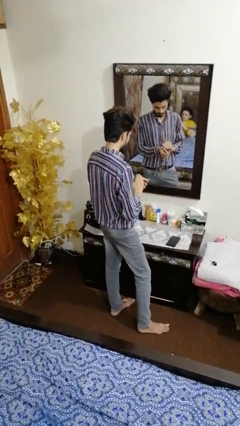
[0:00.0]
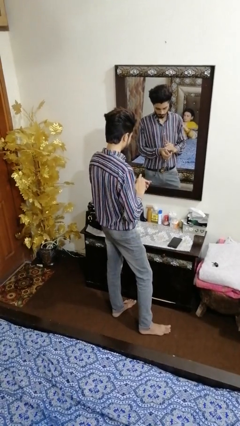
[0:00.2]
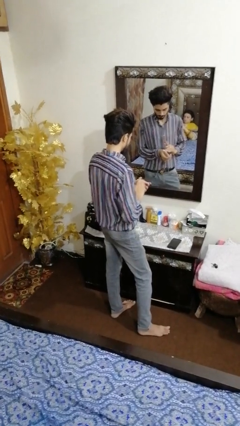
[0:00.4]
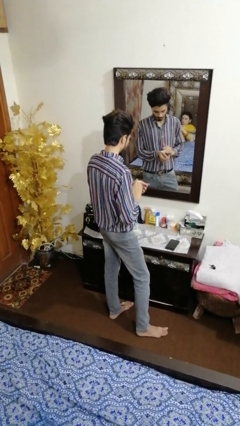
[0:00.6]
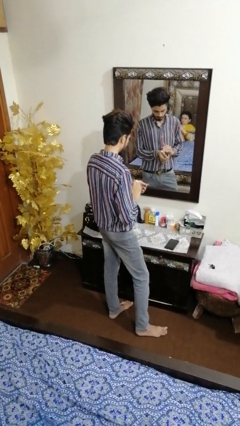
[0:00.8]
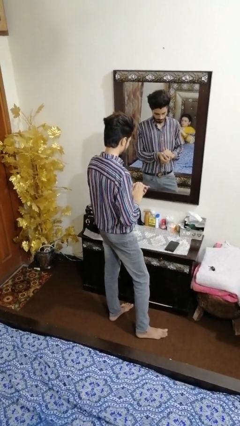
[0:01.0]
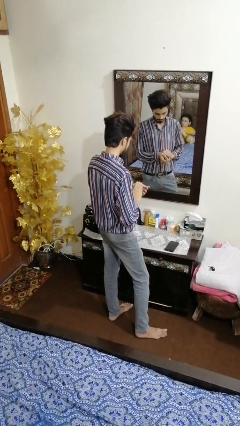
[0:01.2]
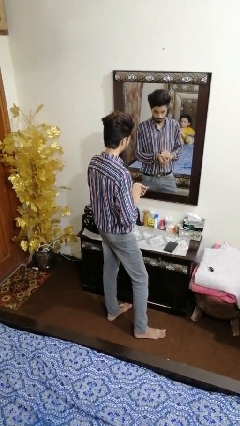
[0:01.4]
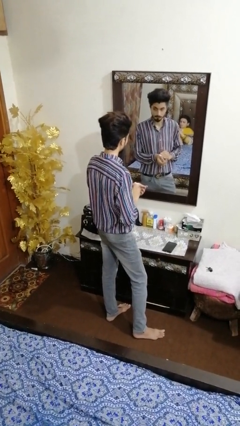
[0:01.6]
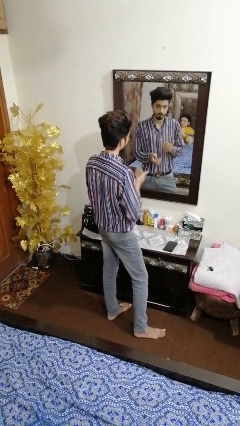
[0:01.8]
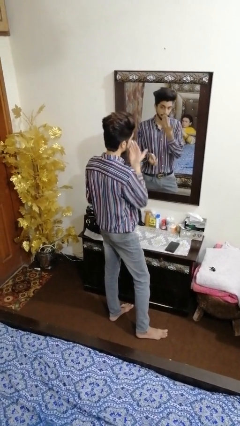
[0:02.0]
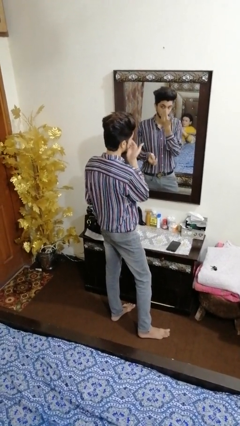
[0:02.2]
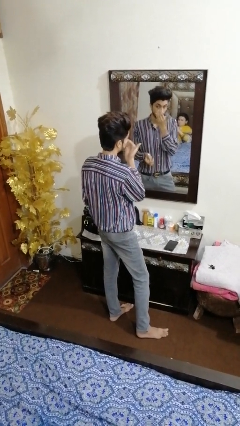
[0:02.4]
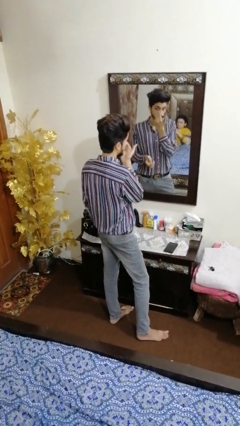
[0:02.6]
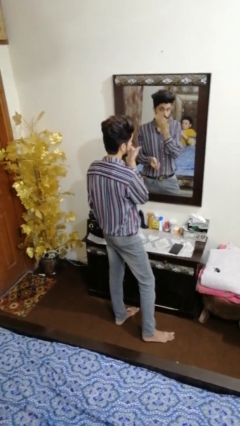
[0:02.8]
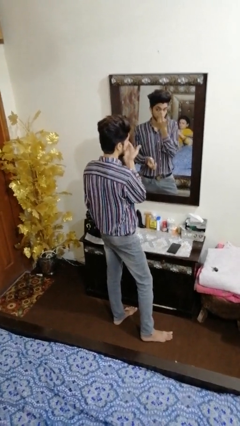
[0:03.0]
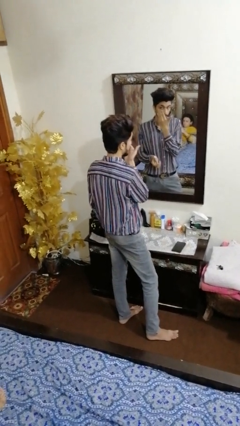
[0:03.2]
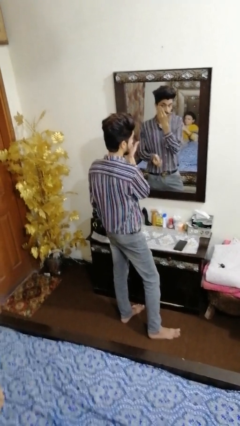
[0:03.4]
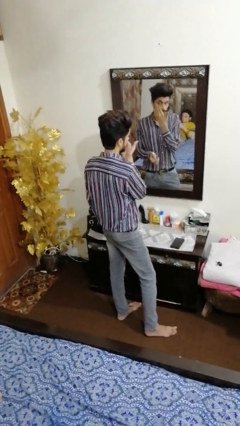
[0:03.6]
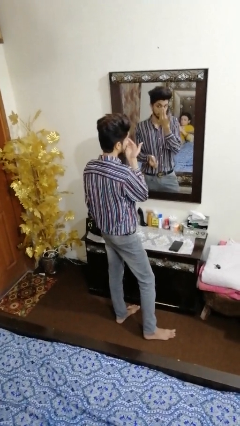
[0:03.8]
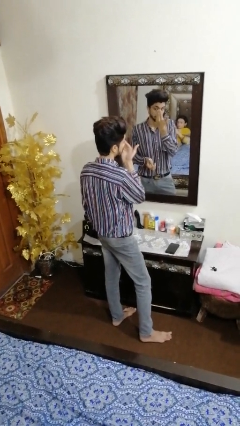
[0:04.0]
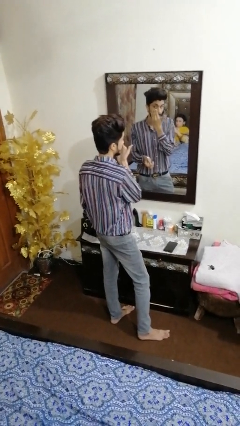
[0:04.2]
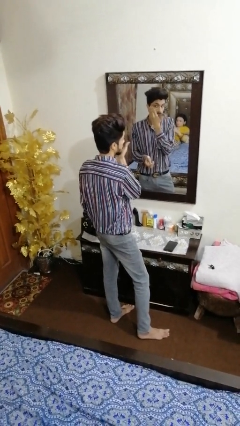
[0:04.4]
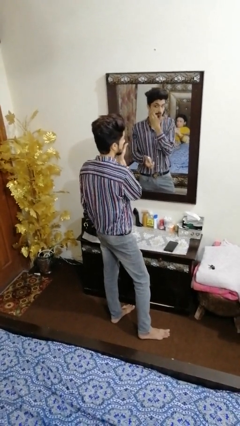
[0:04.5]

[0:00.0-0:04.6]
person applies foundation makeup

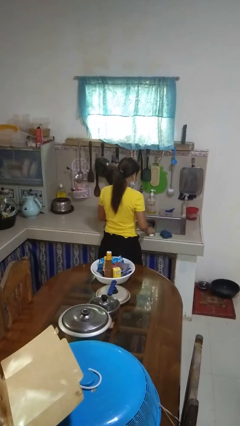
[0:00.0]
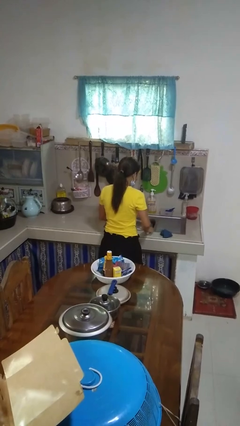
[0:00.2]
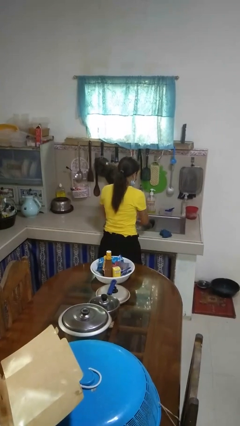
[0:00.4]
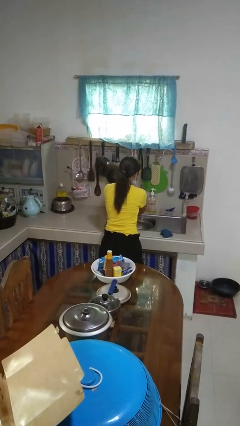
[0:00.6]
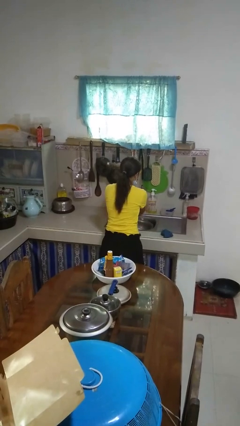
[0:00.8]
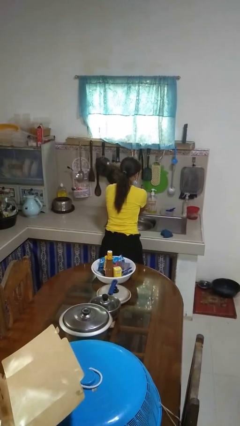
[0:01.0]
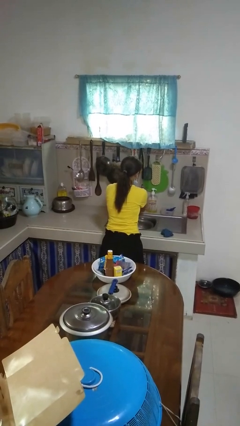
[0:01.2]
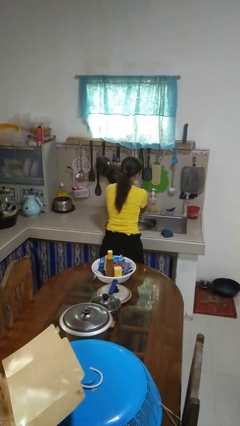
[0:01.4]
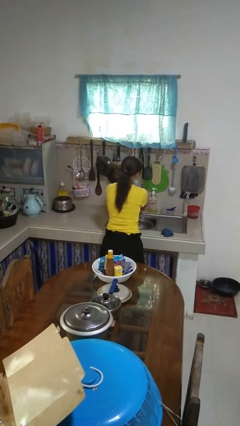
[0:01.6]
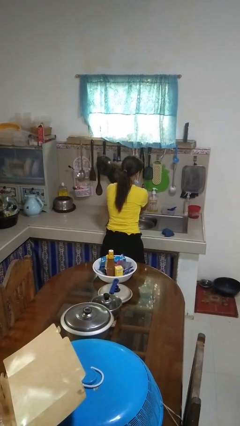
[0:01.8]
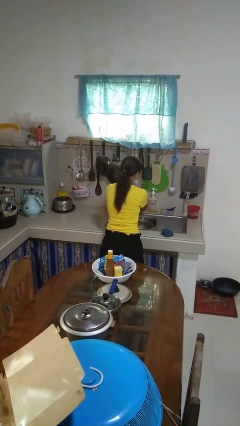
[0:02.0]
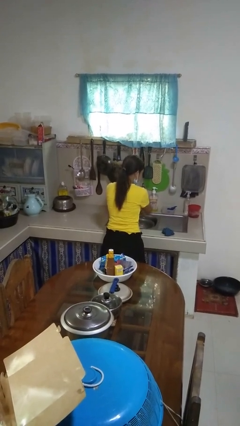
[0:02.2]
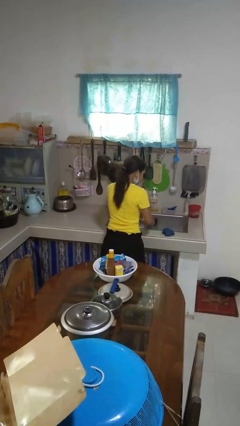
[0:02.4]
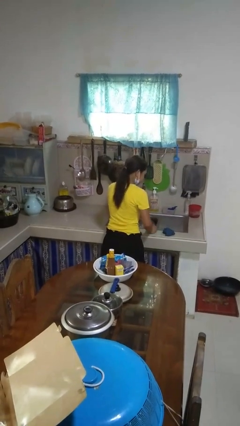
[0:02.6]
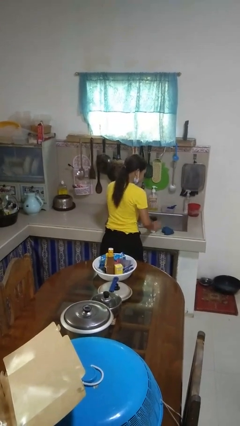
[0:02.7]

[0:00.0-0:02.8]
person washes hands

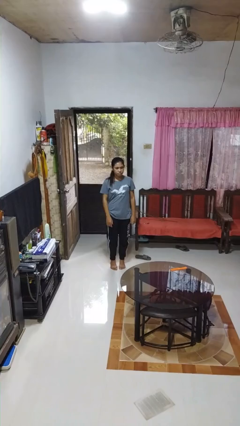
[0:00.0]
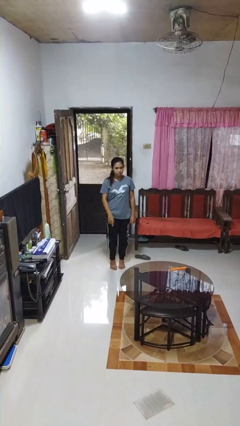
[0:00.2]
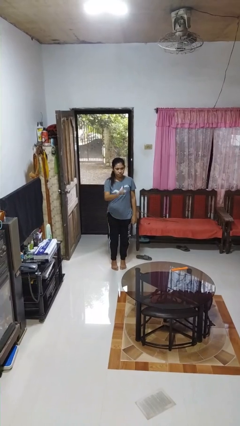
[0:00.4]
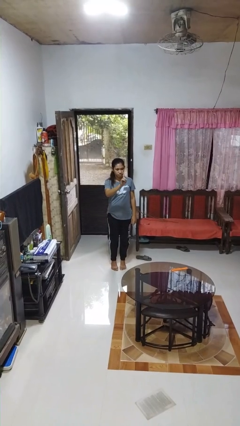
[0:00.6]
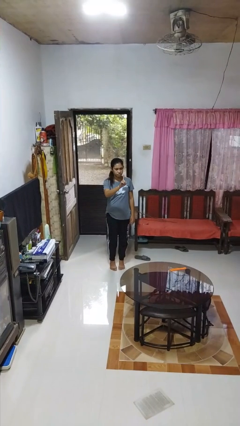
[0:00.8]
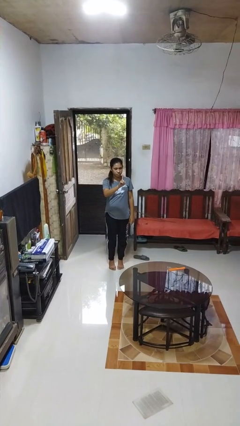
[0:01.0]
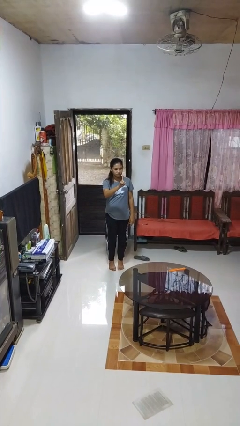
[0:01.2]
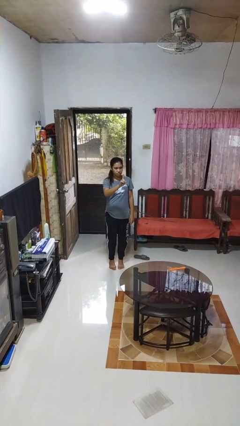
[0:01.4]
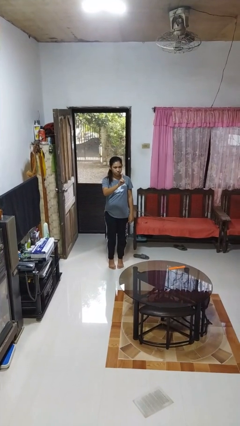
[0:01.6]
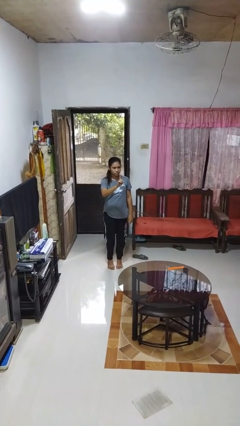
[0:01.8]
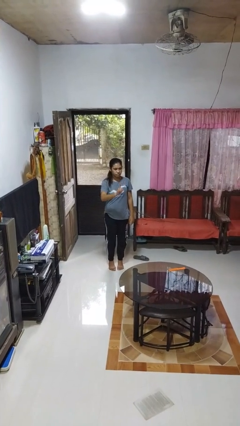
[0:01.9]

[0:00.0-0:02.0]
person gestures number one

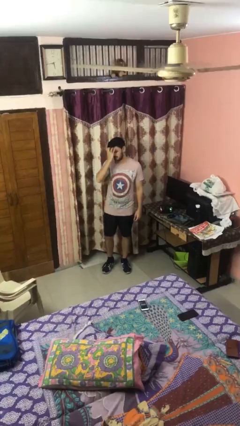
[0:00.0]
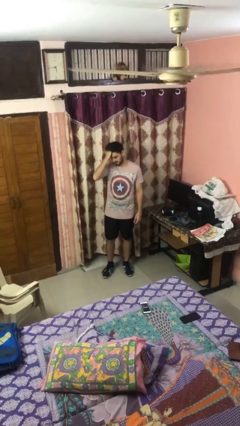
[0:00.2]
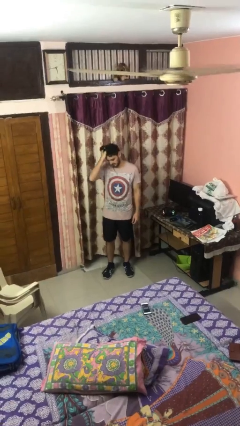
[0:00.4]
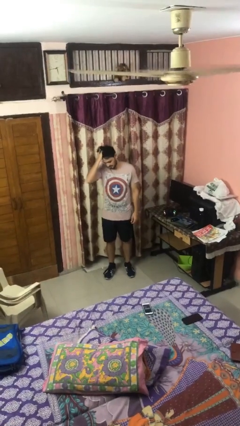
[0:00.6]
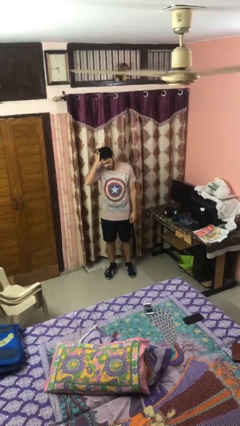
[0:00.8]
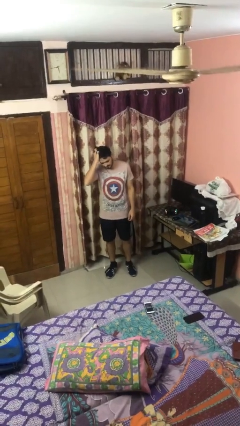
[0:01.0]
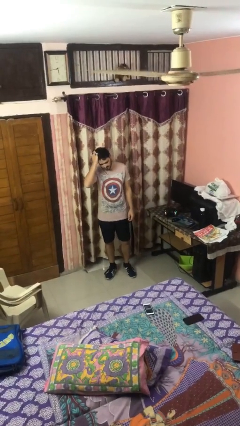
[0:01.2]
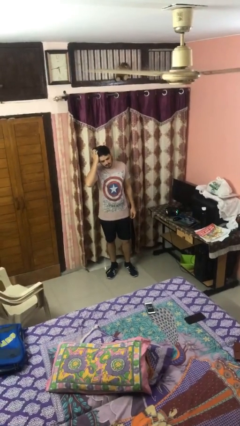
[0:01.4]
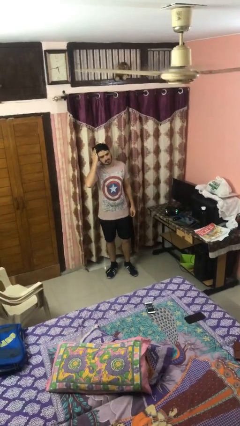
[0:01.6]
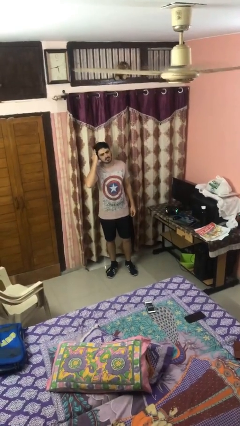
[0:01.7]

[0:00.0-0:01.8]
person scratches face

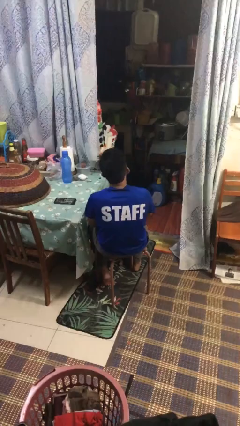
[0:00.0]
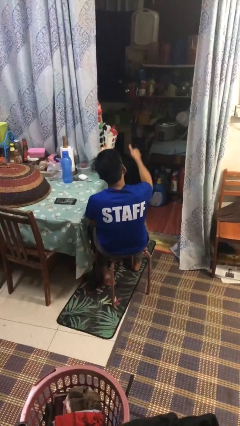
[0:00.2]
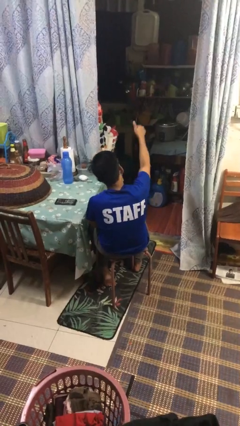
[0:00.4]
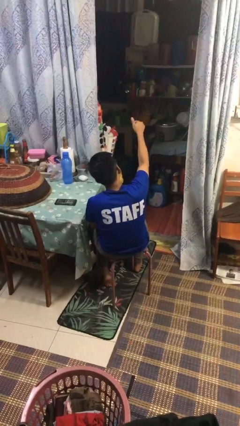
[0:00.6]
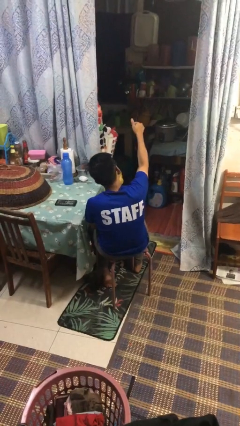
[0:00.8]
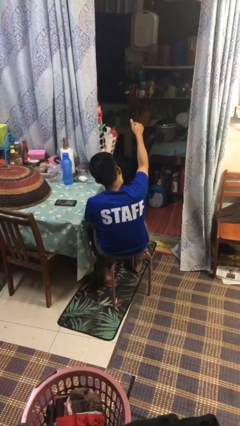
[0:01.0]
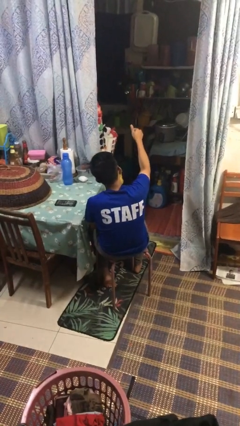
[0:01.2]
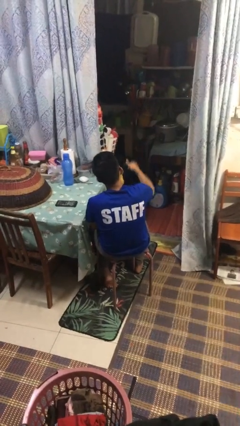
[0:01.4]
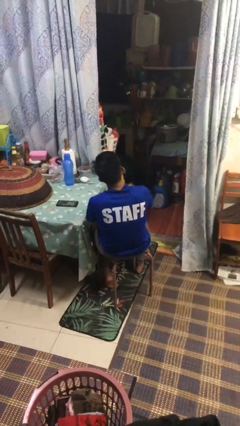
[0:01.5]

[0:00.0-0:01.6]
person gestures thumbs up

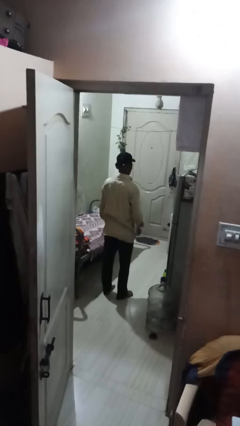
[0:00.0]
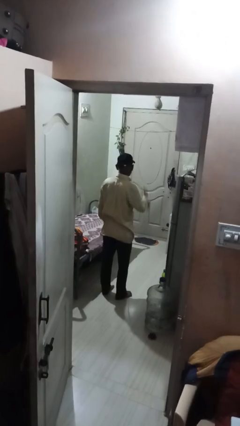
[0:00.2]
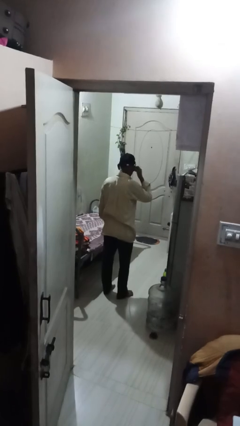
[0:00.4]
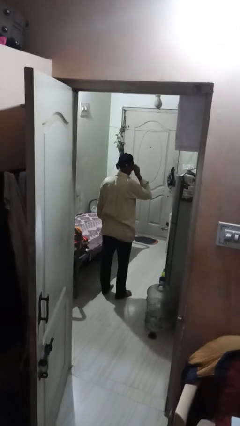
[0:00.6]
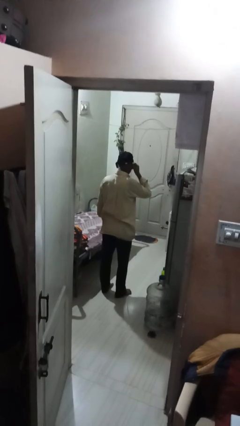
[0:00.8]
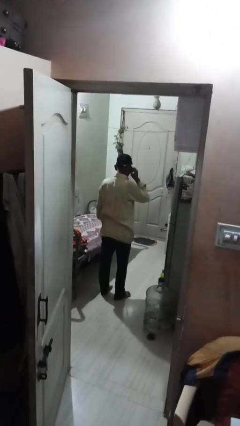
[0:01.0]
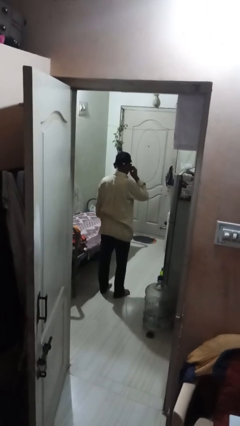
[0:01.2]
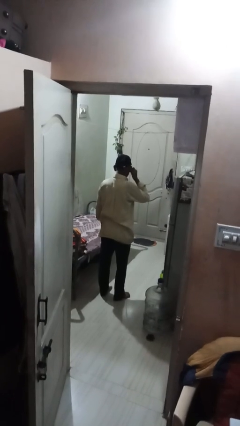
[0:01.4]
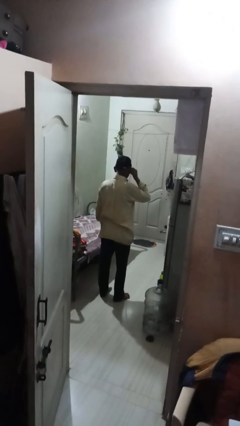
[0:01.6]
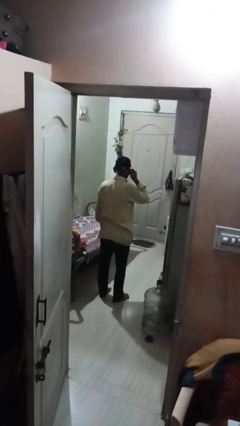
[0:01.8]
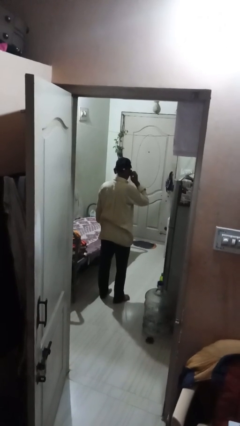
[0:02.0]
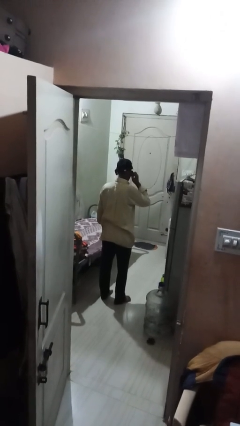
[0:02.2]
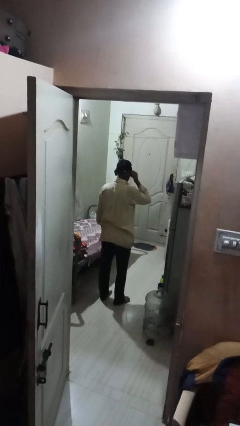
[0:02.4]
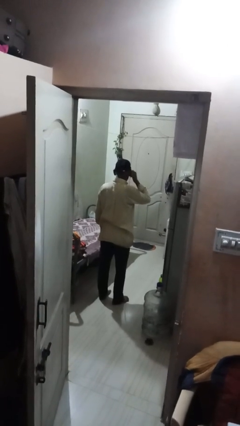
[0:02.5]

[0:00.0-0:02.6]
person touches earlobe

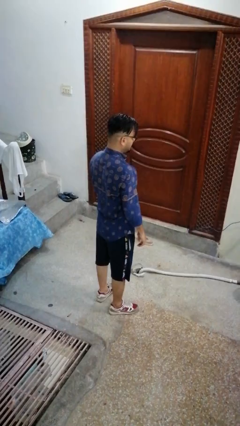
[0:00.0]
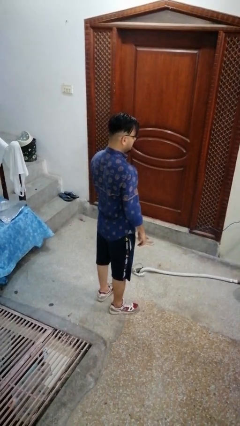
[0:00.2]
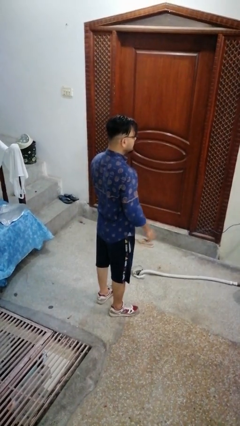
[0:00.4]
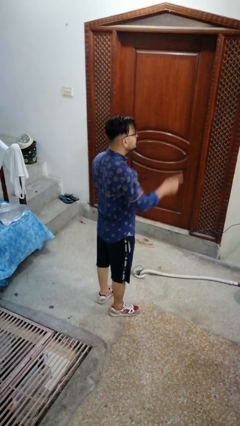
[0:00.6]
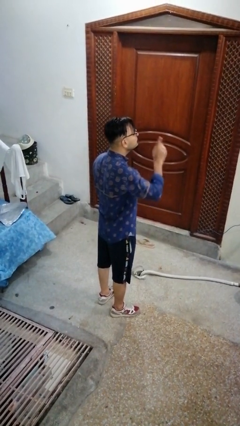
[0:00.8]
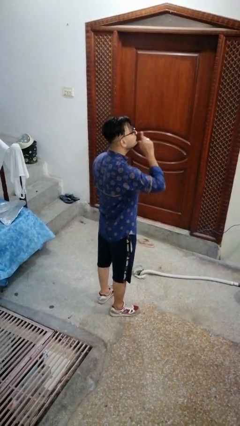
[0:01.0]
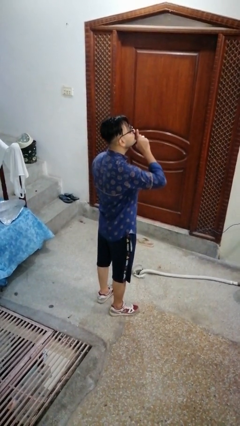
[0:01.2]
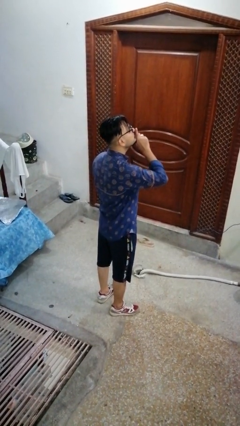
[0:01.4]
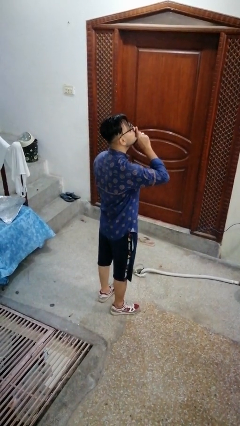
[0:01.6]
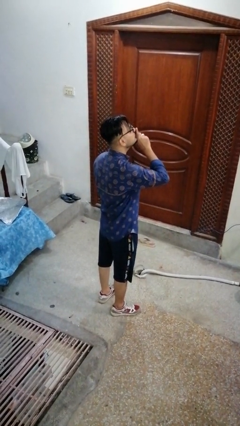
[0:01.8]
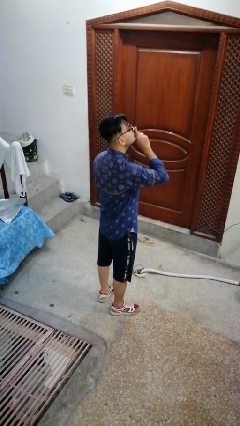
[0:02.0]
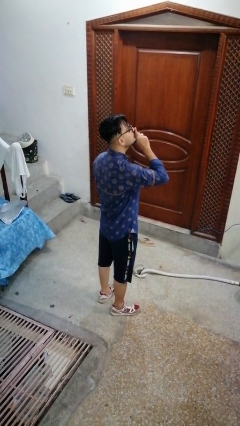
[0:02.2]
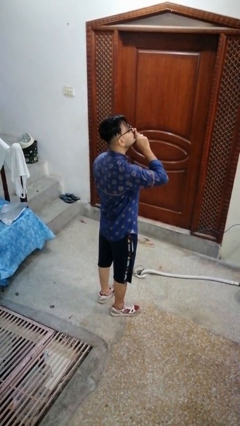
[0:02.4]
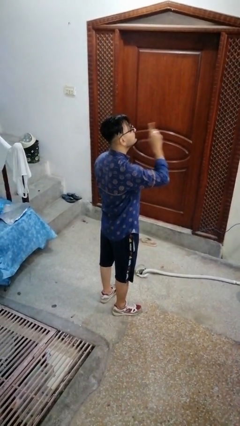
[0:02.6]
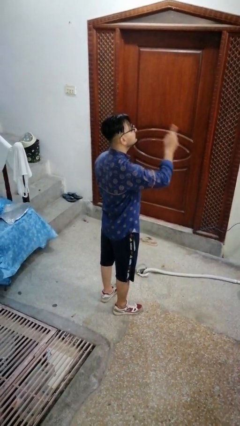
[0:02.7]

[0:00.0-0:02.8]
person gestures be quiet
